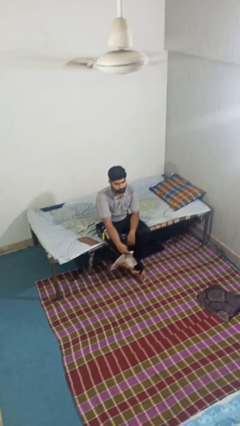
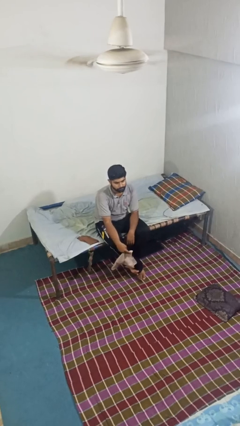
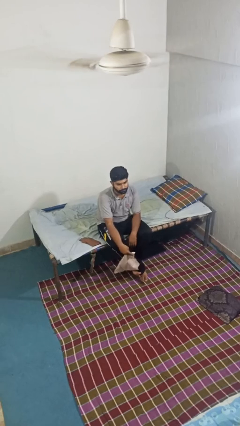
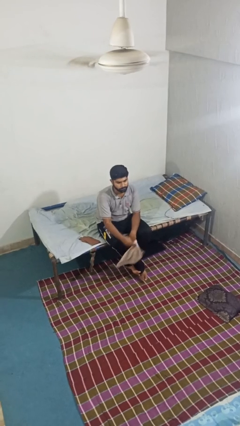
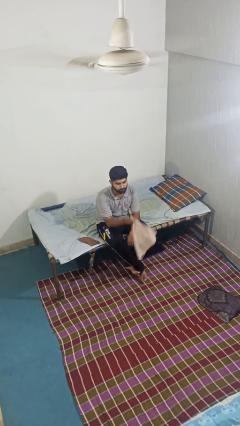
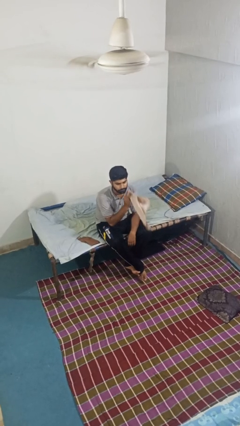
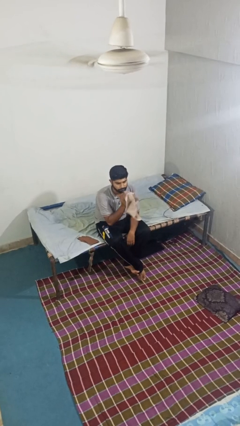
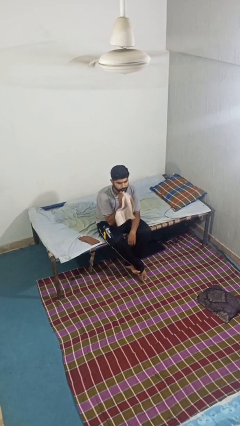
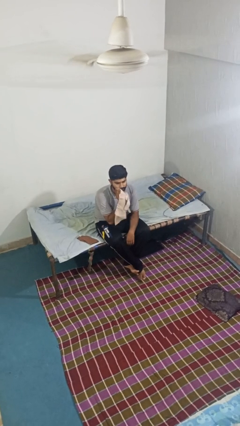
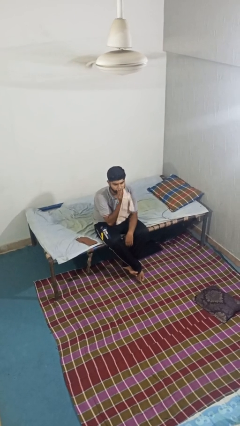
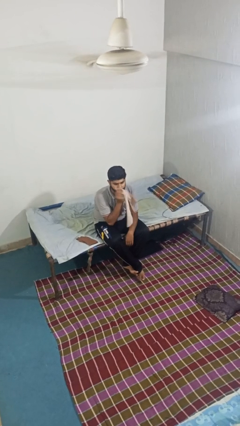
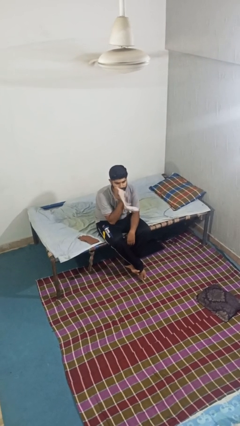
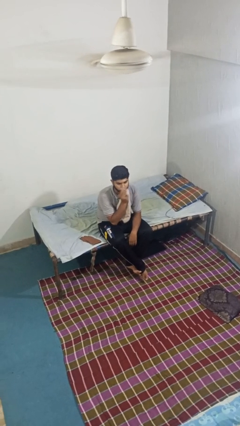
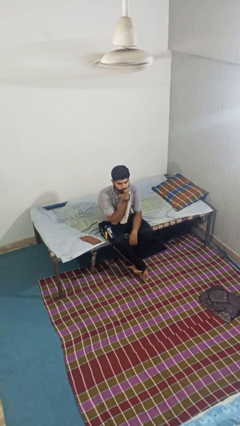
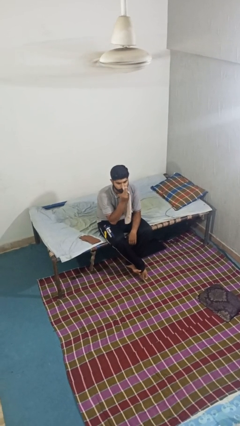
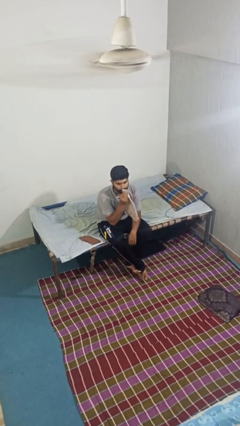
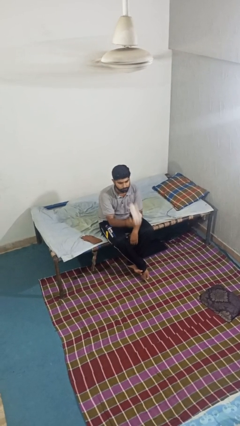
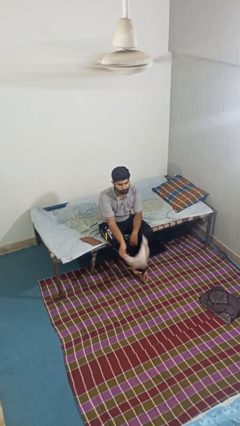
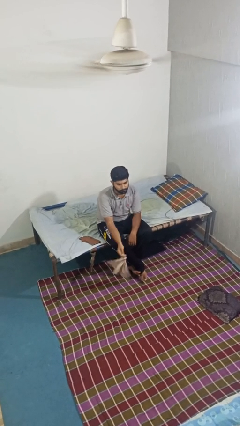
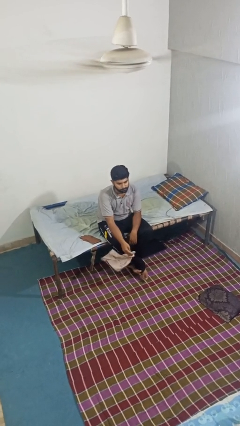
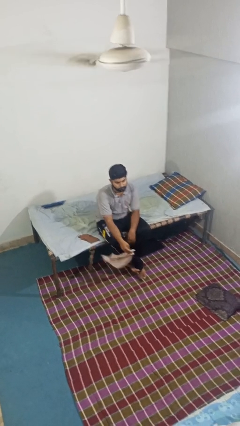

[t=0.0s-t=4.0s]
person wipes mouth with napkin

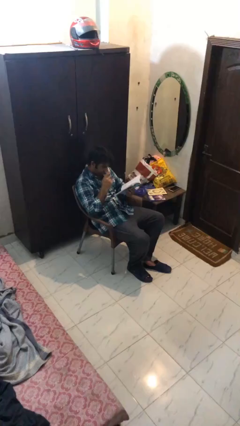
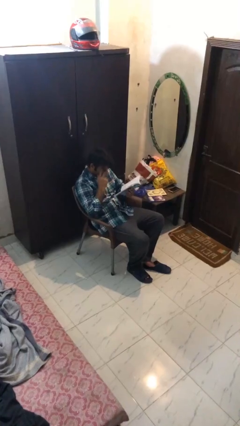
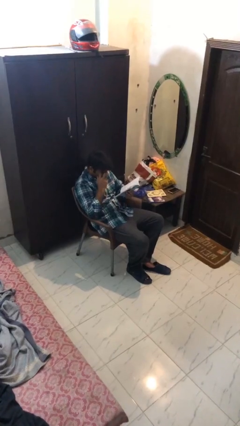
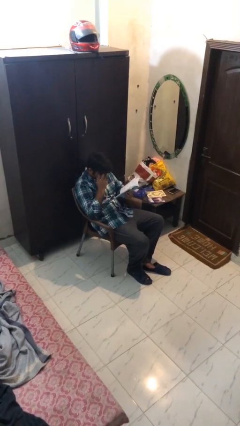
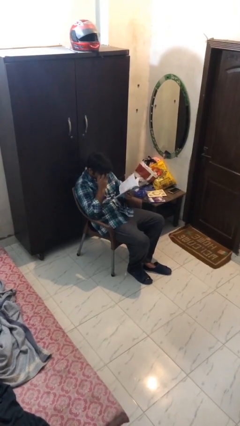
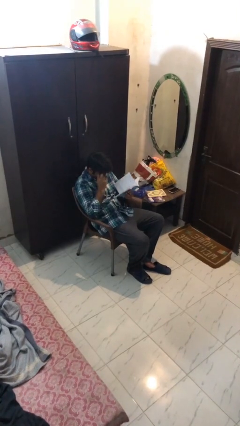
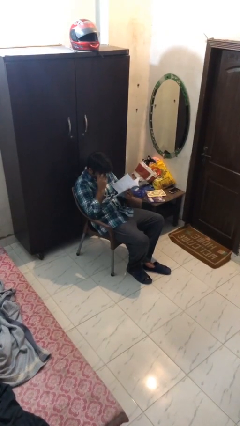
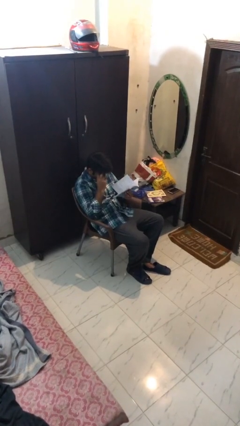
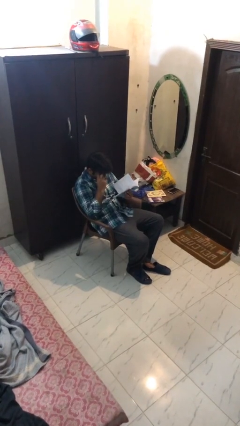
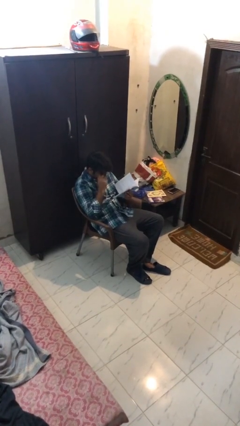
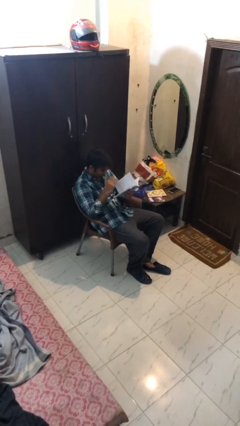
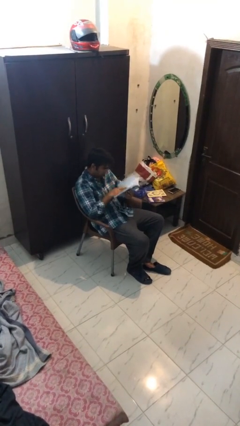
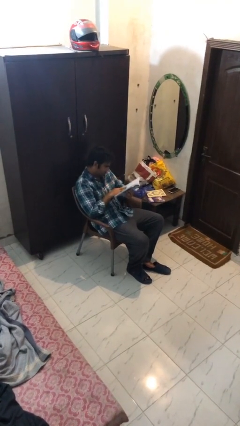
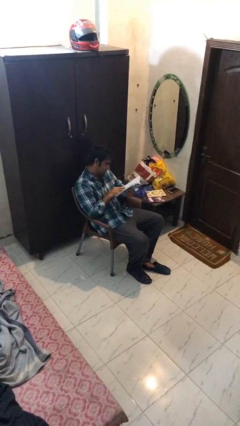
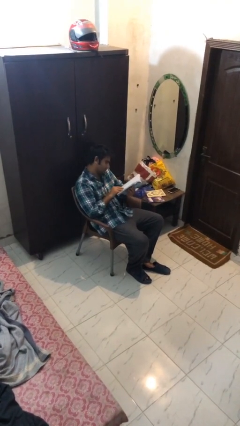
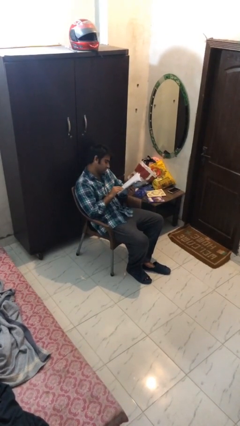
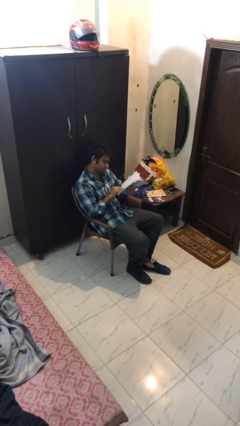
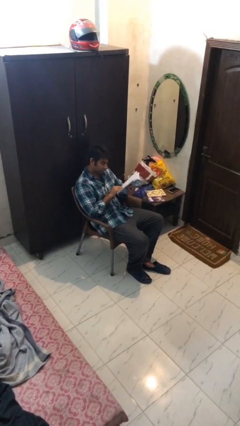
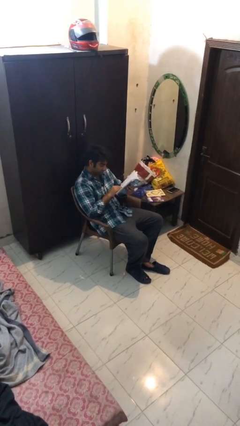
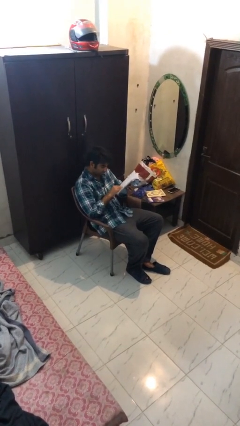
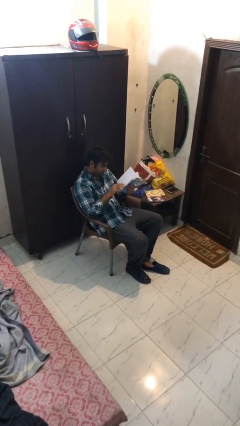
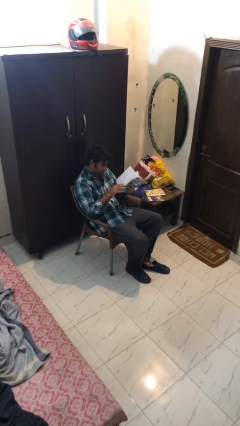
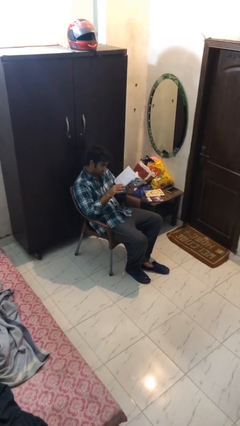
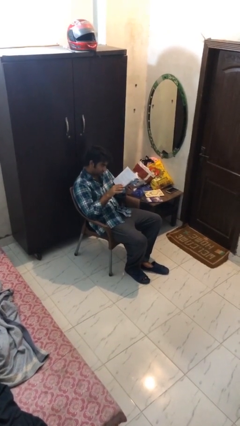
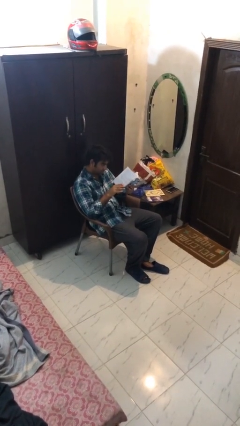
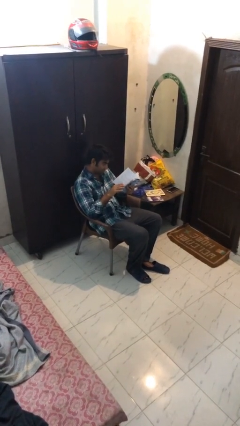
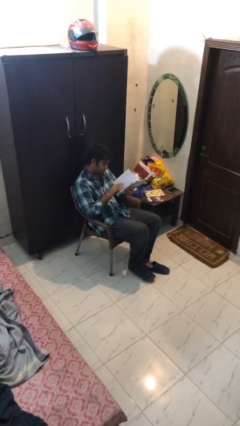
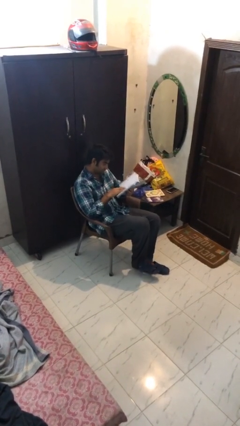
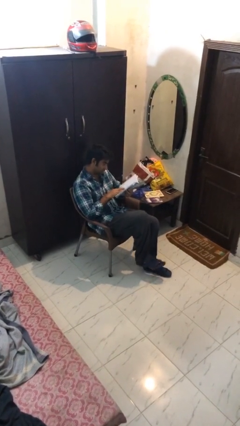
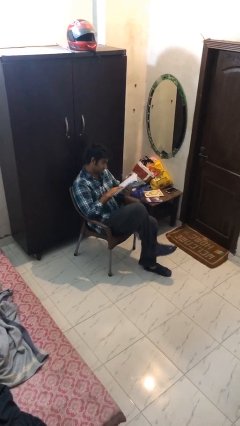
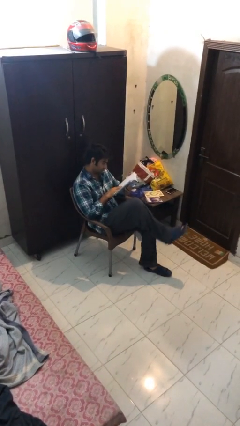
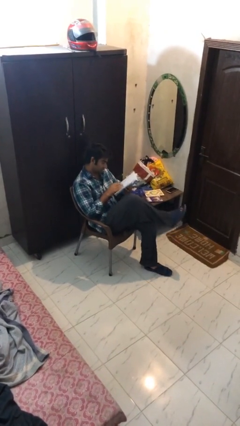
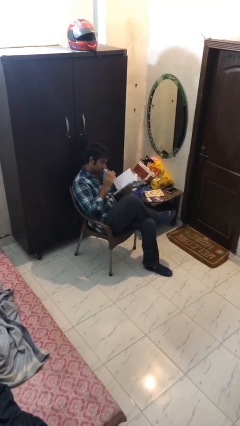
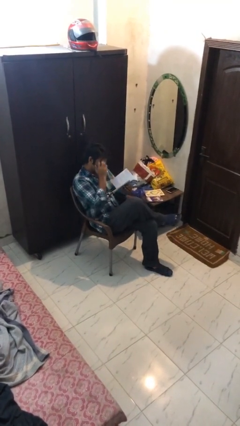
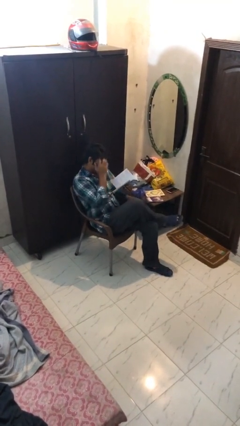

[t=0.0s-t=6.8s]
person reads document

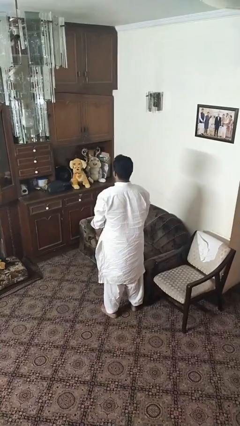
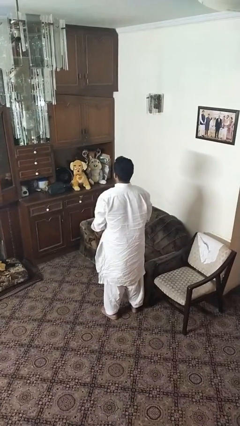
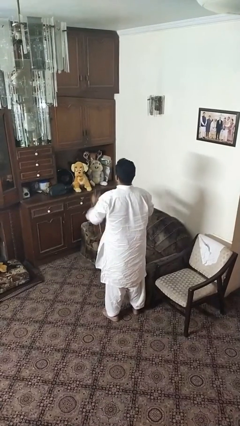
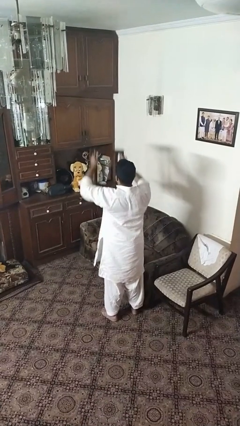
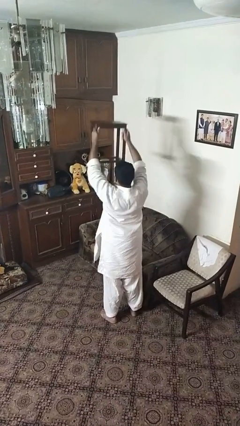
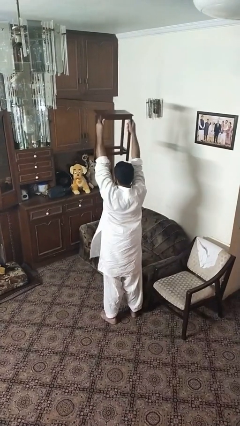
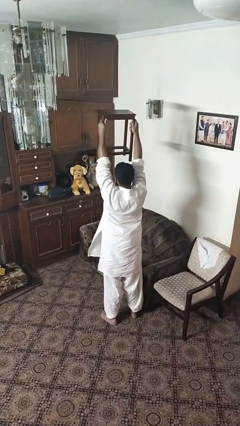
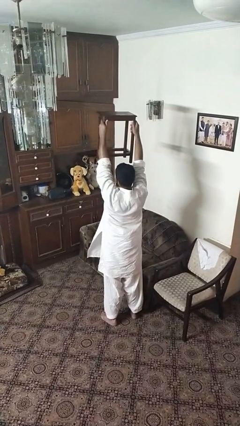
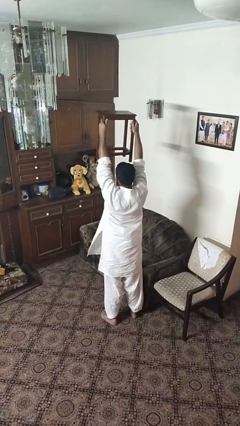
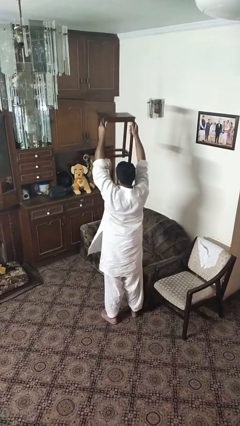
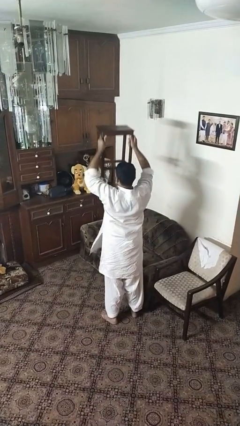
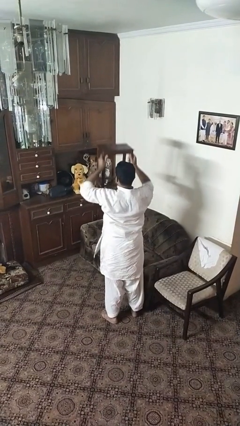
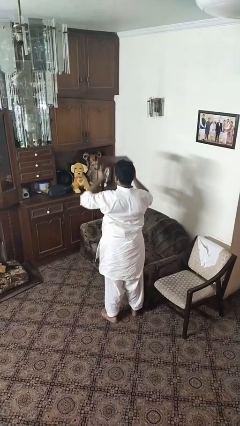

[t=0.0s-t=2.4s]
person holds object above head

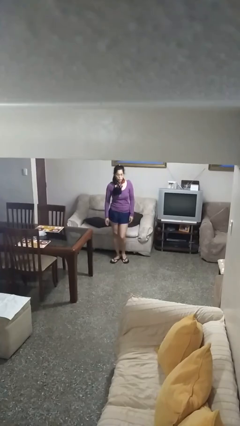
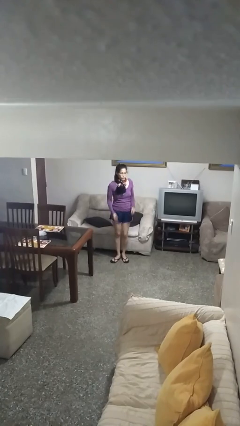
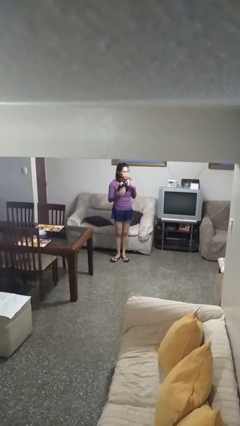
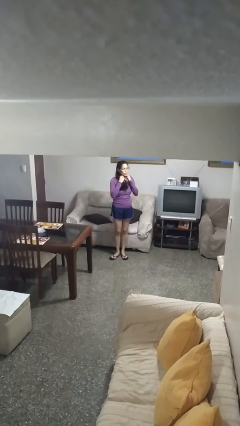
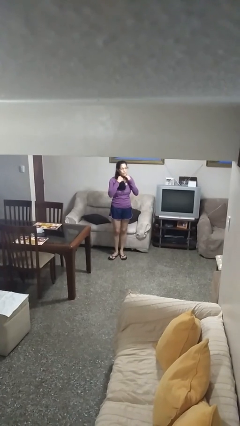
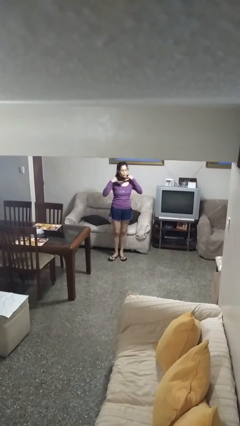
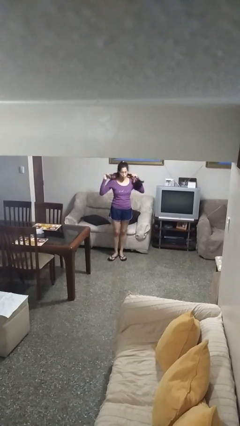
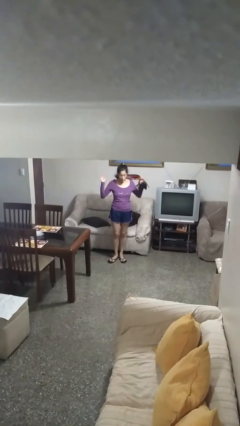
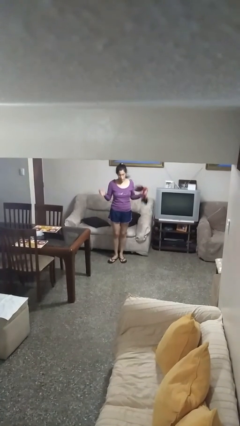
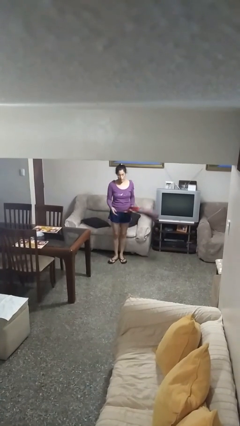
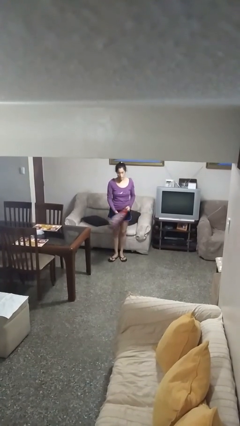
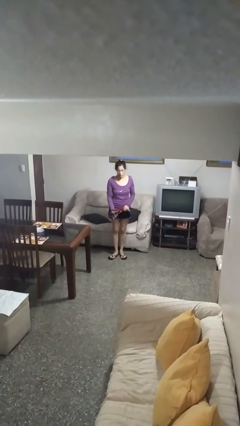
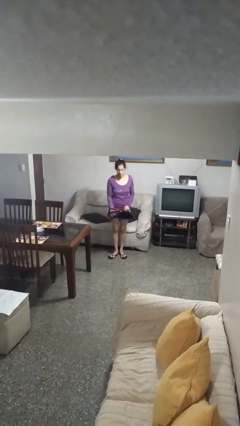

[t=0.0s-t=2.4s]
person takes off scarf

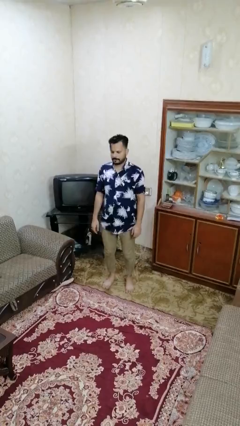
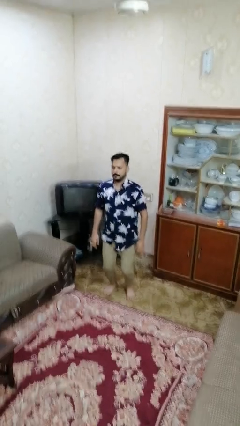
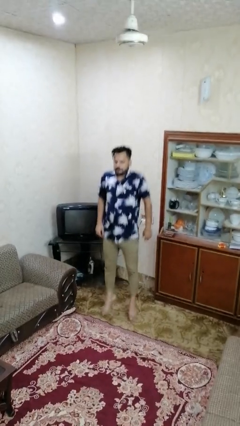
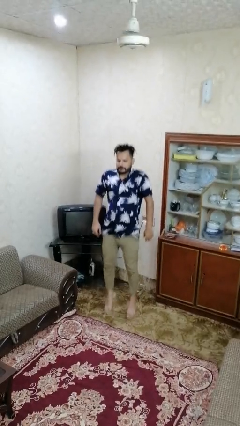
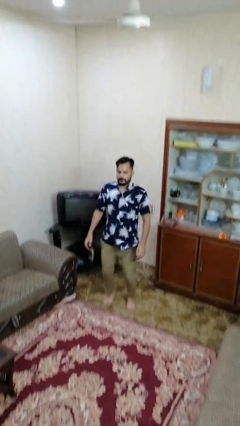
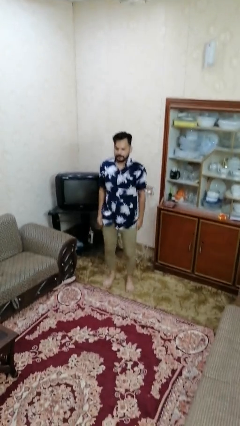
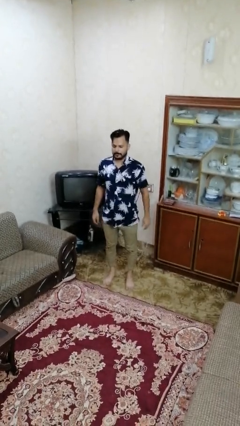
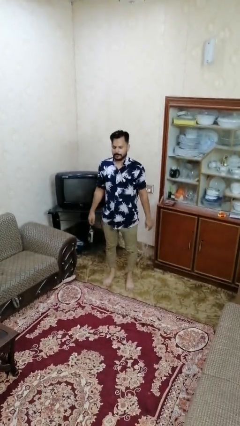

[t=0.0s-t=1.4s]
person jumps

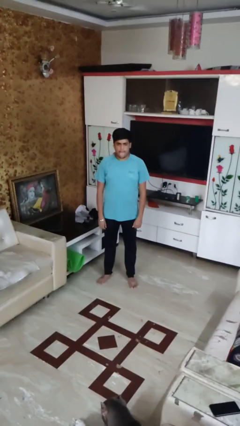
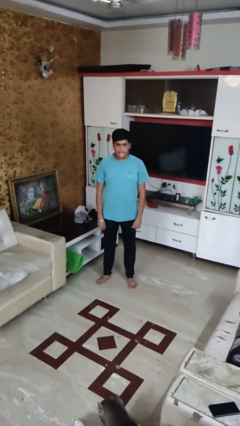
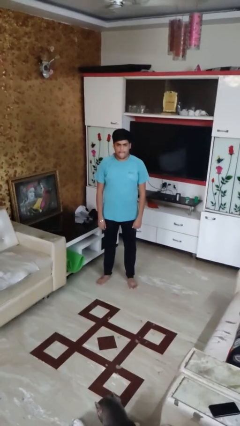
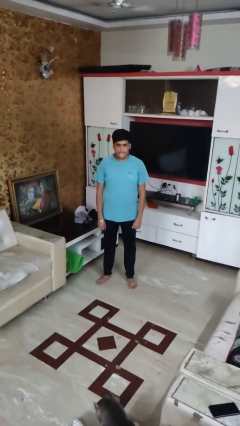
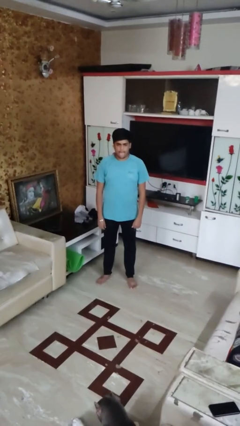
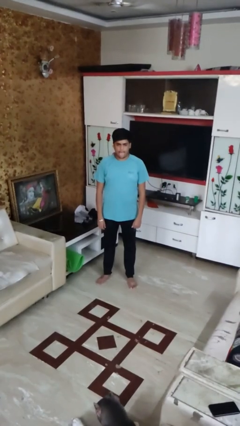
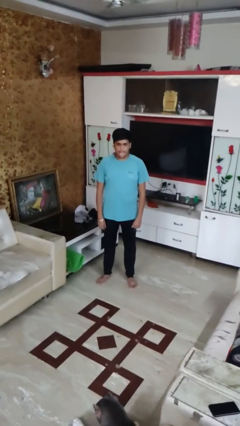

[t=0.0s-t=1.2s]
person sticks out tongue
